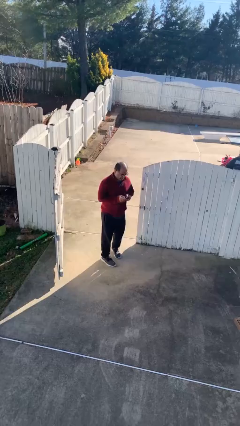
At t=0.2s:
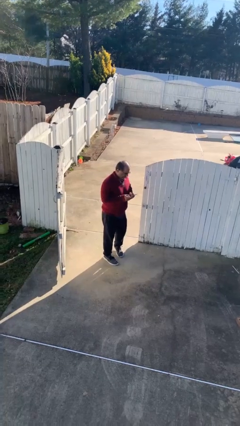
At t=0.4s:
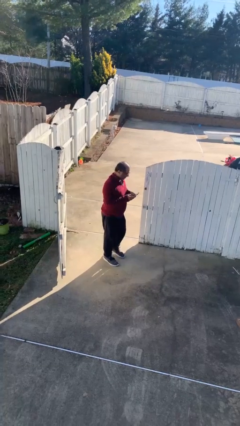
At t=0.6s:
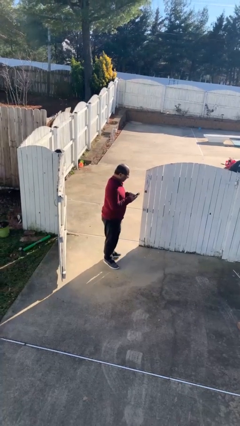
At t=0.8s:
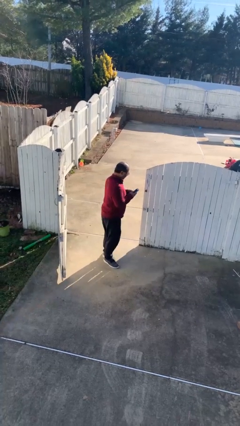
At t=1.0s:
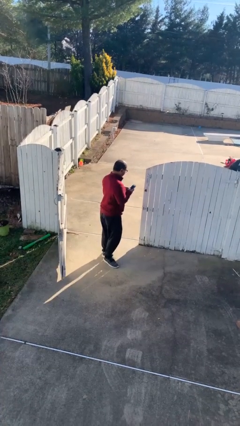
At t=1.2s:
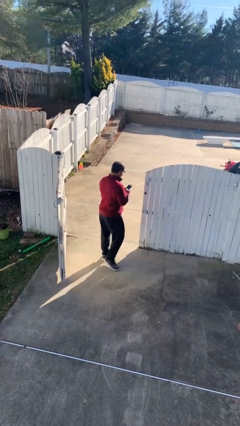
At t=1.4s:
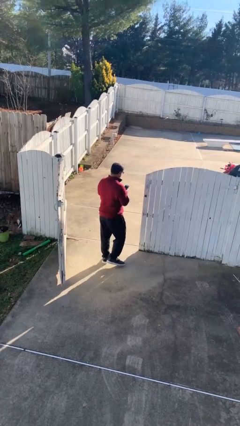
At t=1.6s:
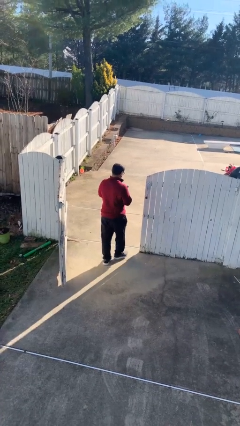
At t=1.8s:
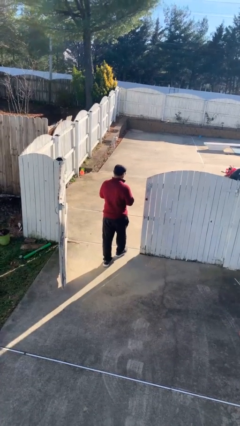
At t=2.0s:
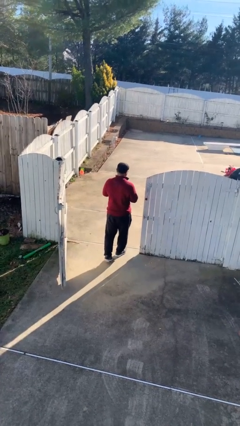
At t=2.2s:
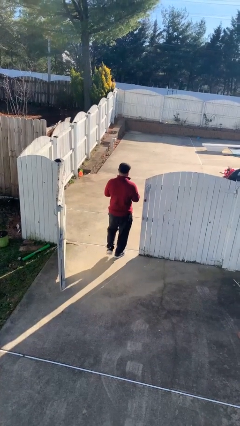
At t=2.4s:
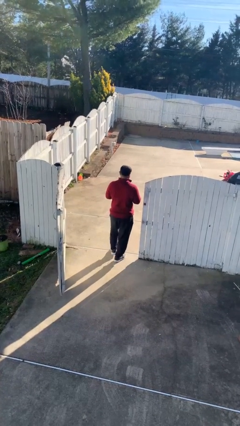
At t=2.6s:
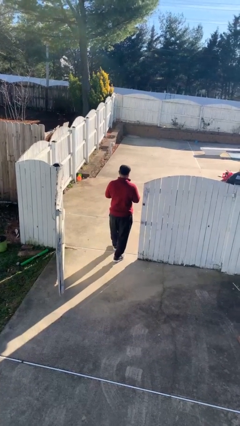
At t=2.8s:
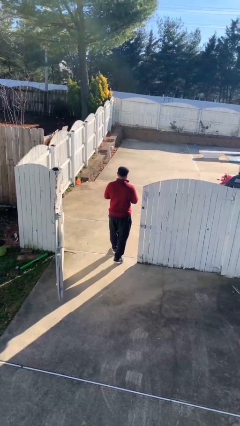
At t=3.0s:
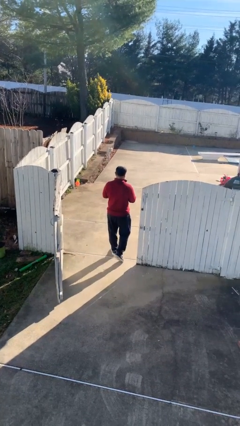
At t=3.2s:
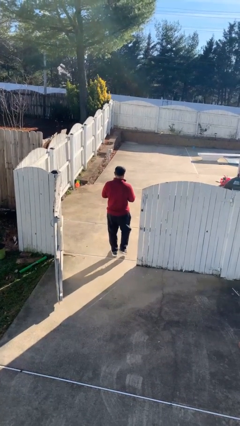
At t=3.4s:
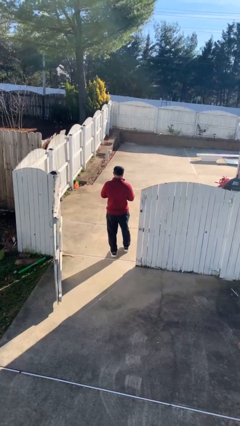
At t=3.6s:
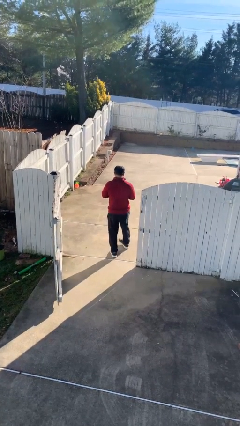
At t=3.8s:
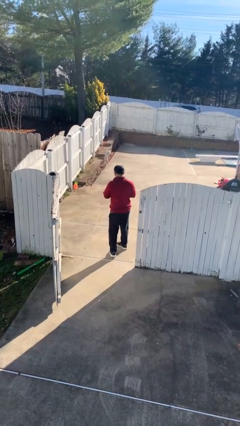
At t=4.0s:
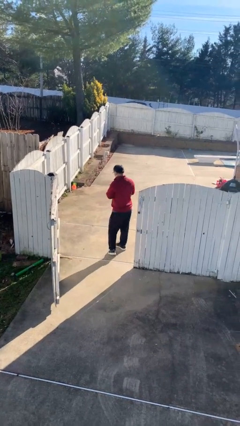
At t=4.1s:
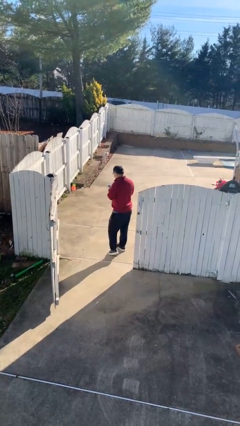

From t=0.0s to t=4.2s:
person exits scene through structure

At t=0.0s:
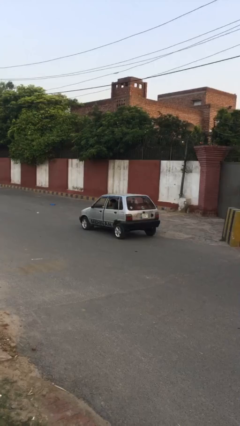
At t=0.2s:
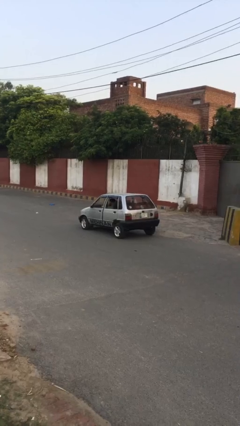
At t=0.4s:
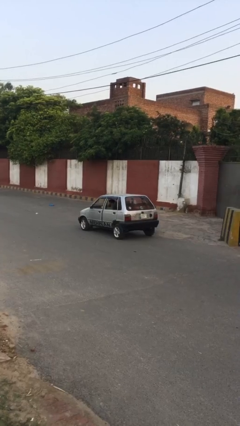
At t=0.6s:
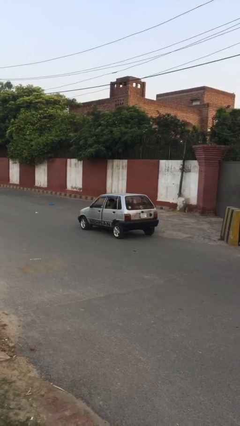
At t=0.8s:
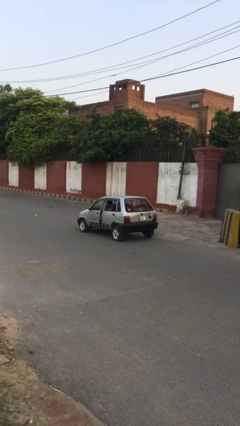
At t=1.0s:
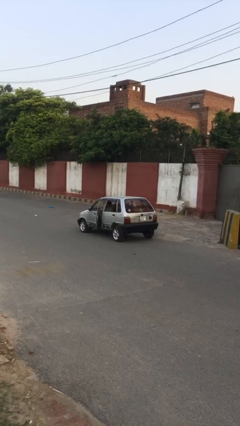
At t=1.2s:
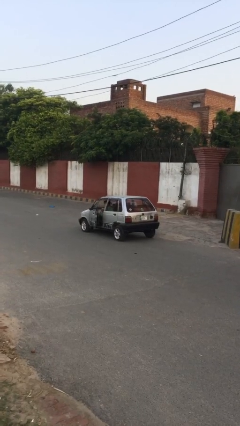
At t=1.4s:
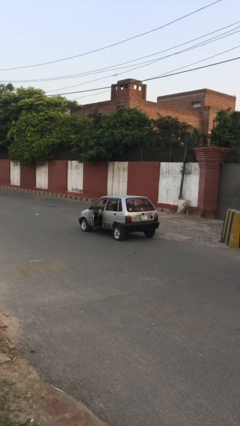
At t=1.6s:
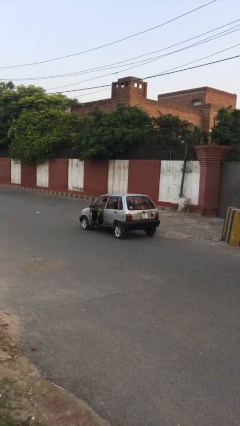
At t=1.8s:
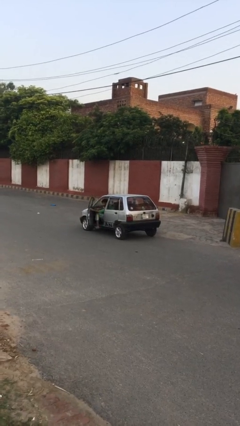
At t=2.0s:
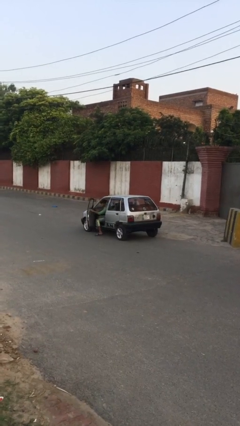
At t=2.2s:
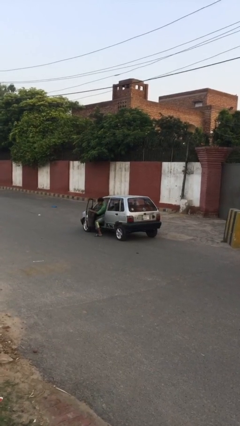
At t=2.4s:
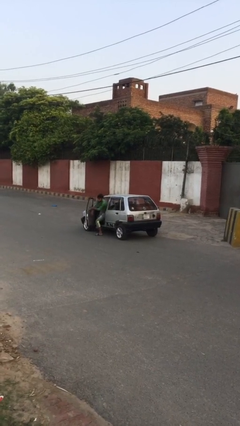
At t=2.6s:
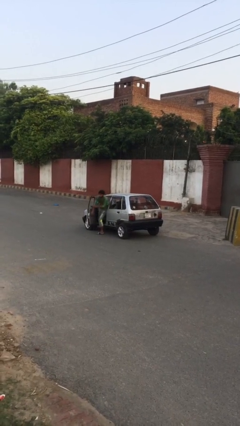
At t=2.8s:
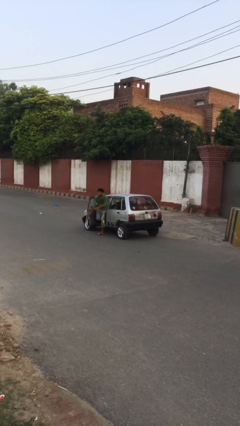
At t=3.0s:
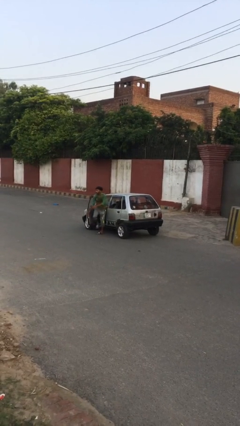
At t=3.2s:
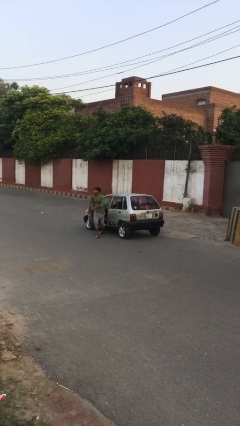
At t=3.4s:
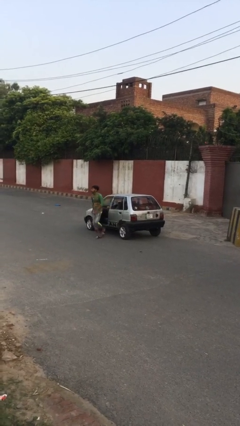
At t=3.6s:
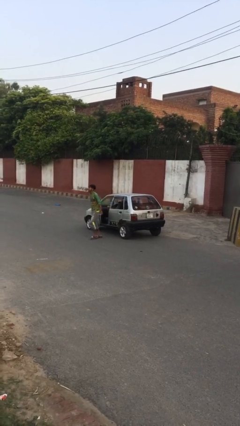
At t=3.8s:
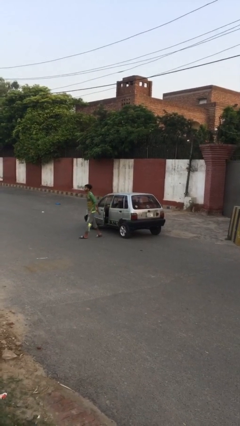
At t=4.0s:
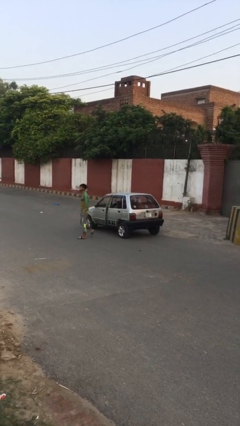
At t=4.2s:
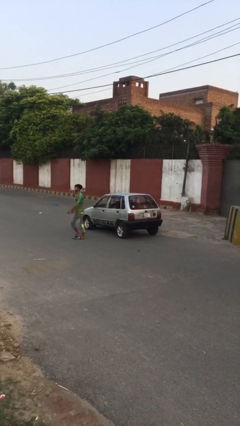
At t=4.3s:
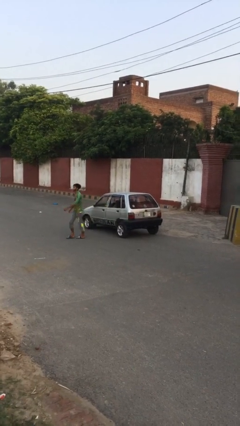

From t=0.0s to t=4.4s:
car drops off person

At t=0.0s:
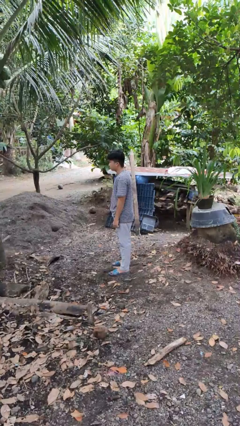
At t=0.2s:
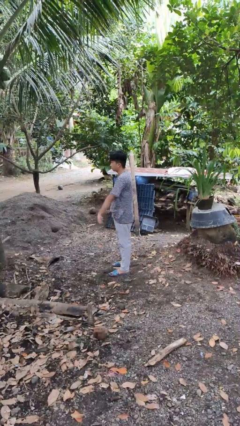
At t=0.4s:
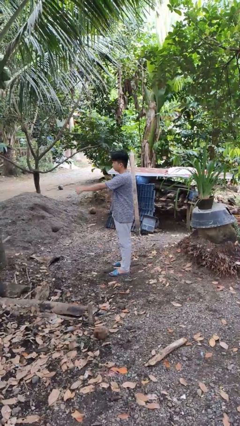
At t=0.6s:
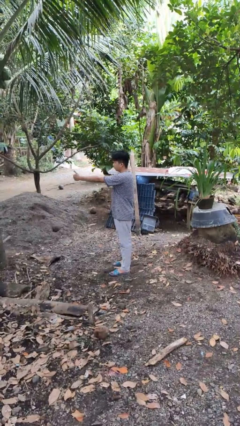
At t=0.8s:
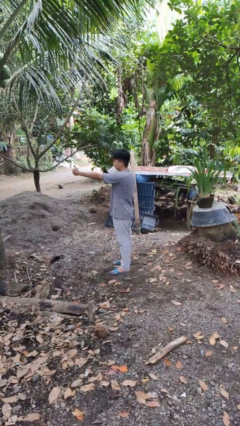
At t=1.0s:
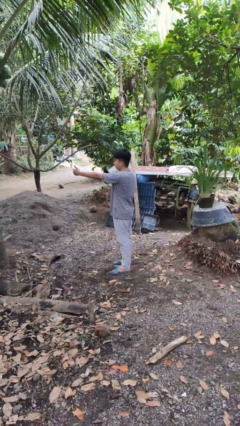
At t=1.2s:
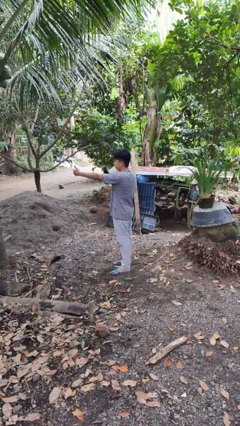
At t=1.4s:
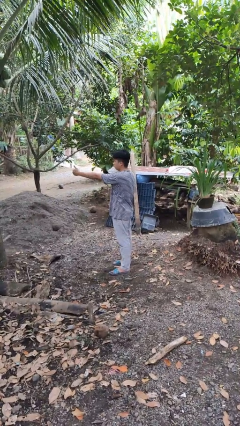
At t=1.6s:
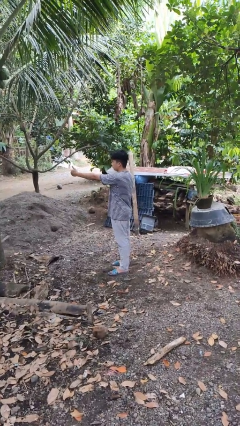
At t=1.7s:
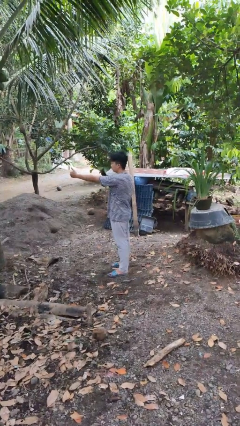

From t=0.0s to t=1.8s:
person gestures thumbs up

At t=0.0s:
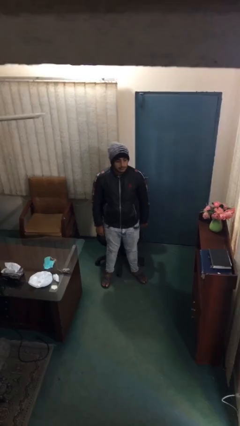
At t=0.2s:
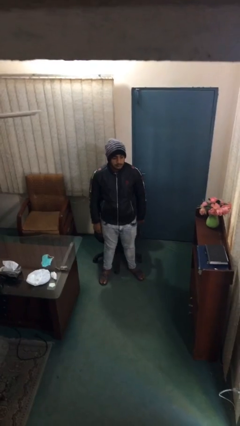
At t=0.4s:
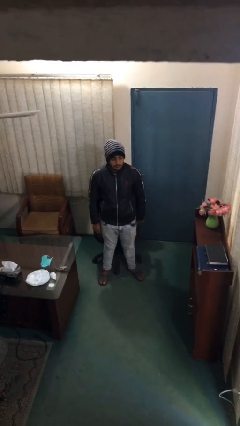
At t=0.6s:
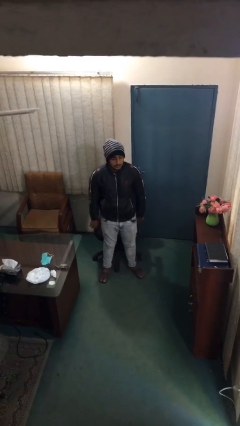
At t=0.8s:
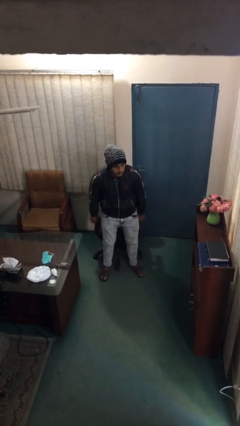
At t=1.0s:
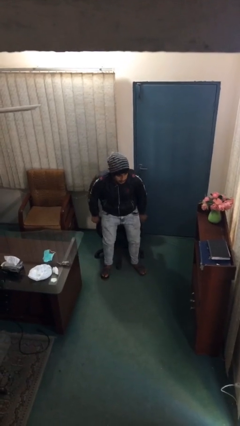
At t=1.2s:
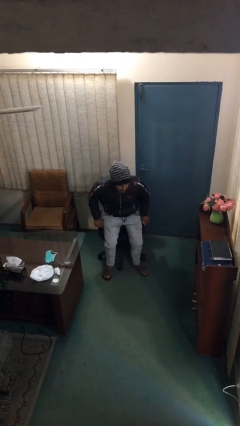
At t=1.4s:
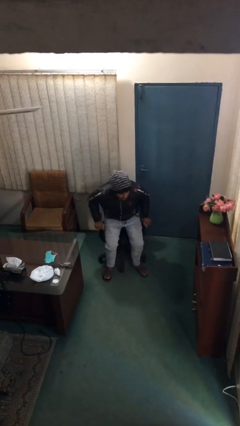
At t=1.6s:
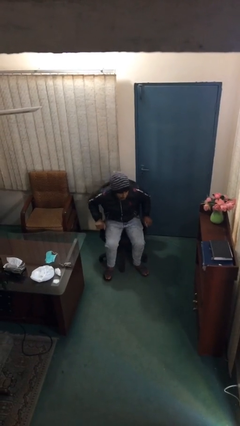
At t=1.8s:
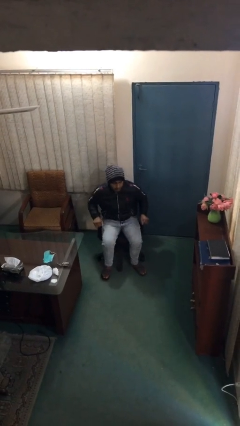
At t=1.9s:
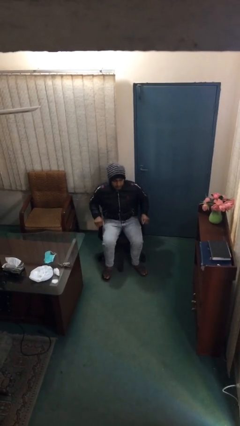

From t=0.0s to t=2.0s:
person sits down

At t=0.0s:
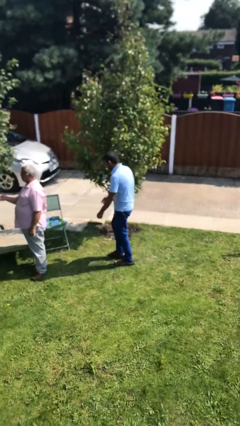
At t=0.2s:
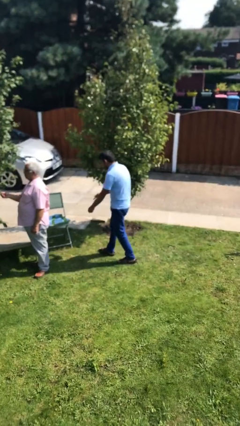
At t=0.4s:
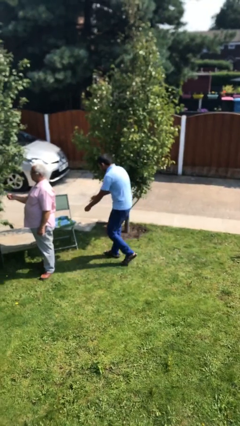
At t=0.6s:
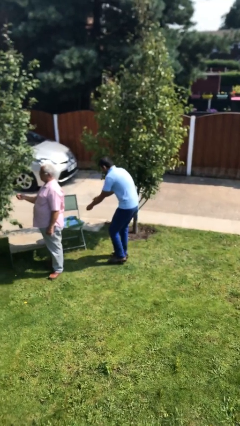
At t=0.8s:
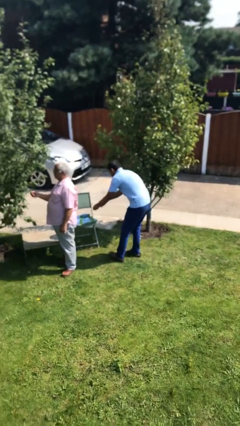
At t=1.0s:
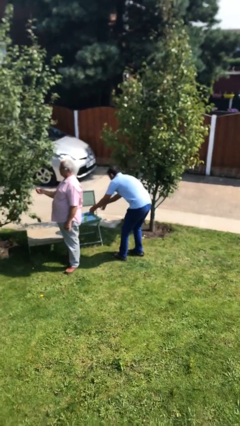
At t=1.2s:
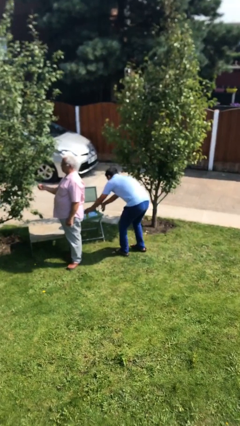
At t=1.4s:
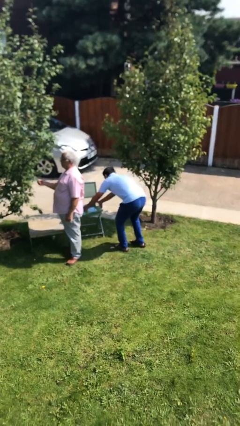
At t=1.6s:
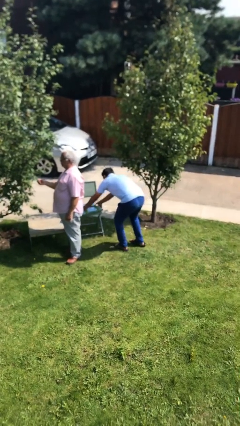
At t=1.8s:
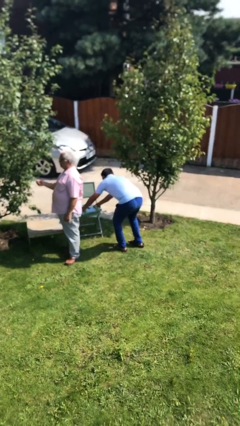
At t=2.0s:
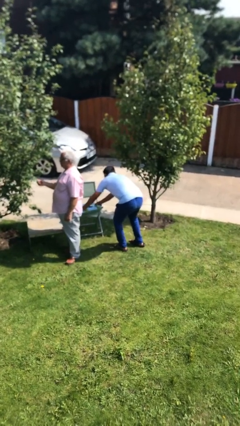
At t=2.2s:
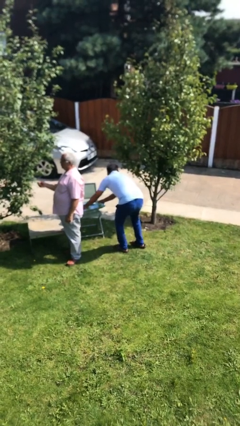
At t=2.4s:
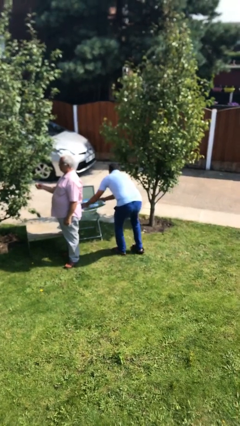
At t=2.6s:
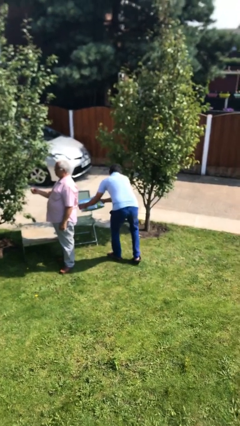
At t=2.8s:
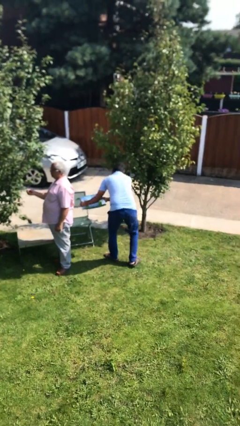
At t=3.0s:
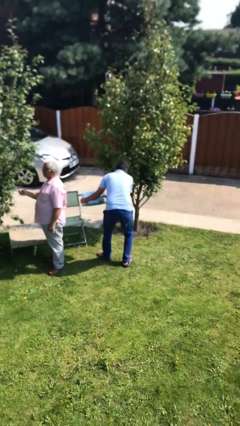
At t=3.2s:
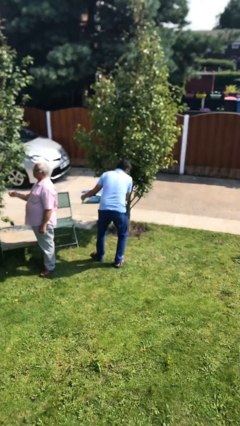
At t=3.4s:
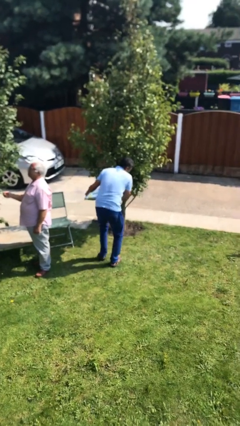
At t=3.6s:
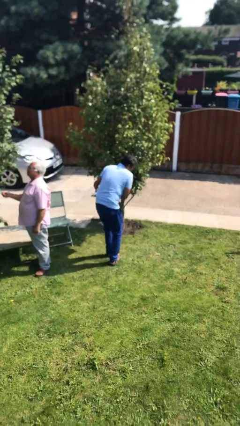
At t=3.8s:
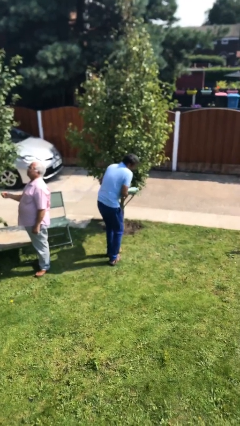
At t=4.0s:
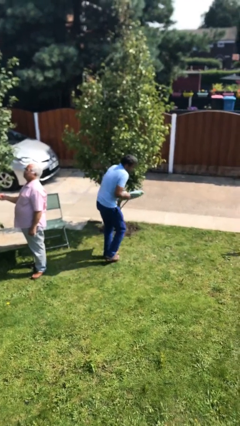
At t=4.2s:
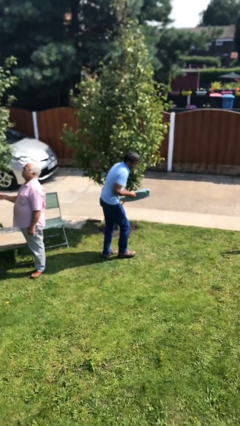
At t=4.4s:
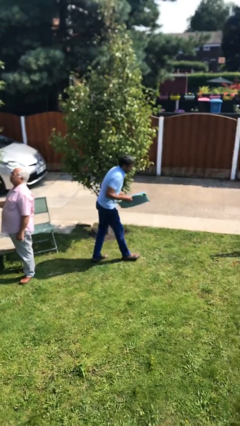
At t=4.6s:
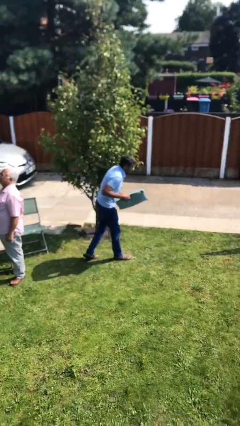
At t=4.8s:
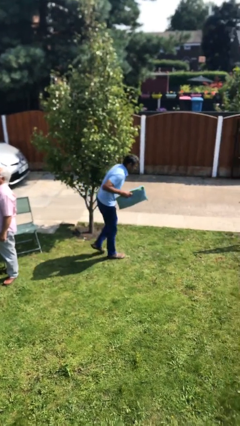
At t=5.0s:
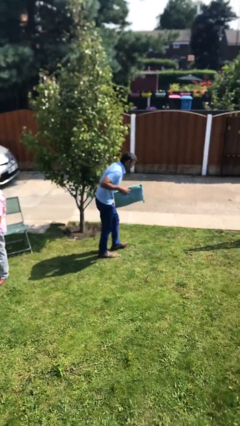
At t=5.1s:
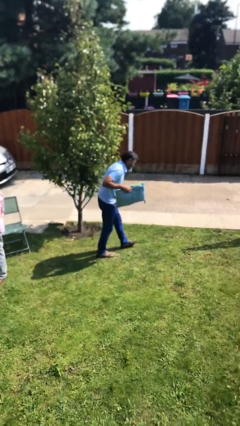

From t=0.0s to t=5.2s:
person steals object from person
